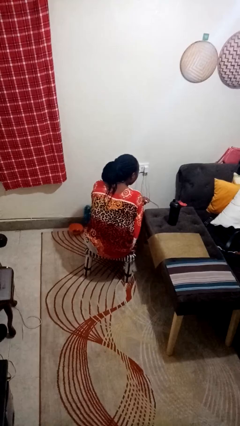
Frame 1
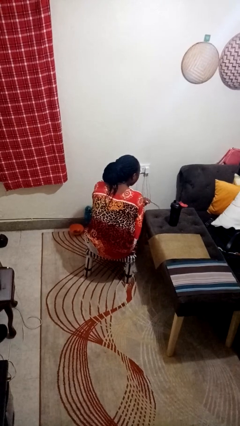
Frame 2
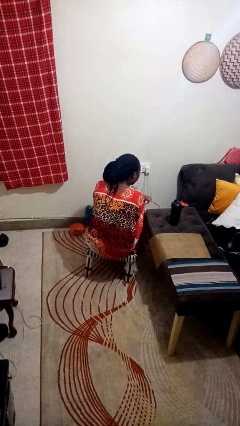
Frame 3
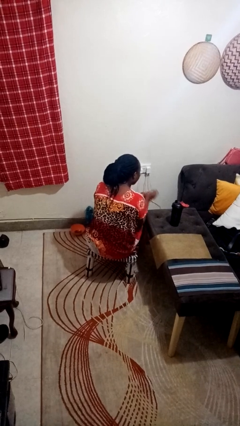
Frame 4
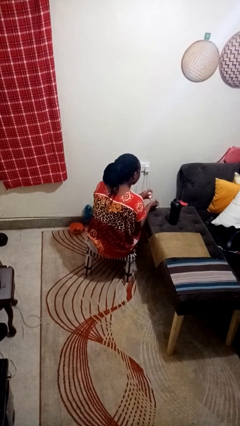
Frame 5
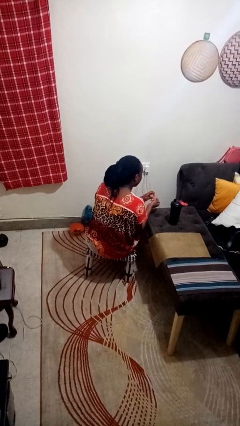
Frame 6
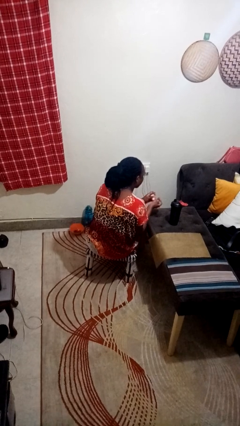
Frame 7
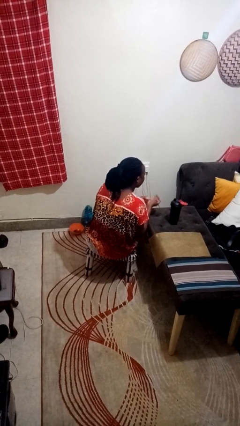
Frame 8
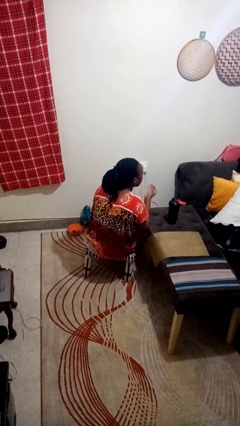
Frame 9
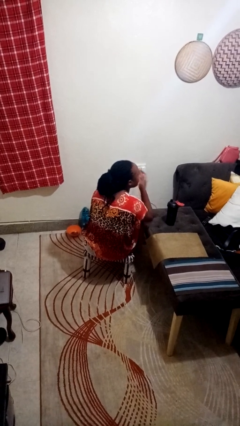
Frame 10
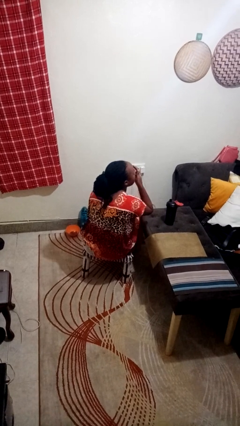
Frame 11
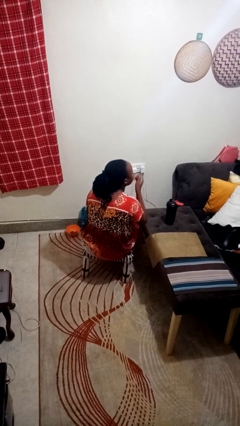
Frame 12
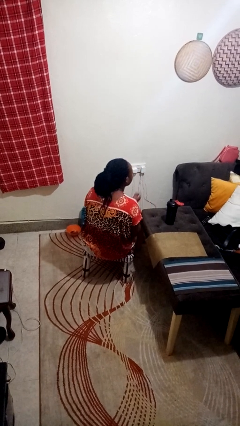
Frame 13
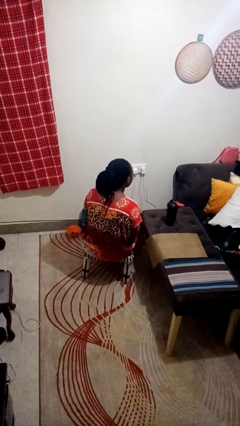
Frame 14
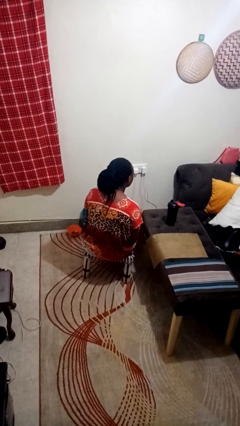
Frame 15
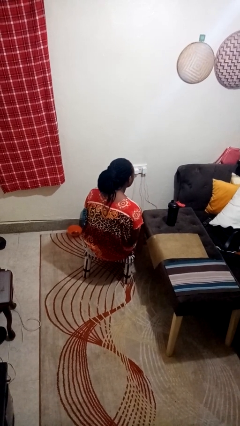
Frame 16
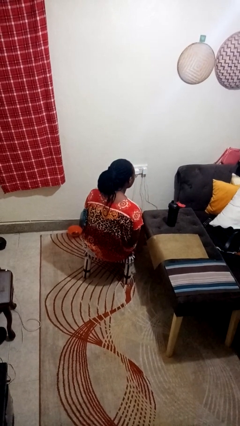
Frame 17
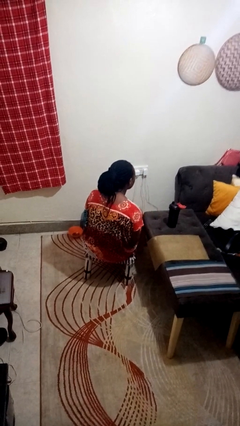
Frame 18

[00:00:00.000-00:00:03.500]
person takes medicine pills

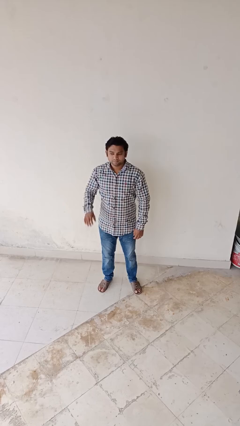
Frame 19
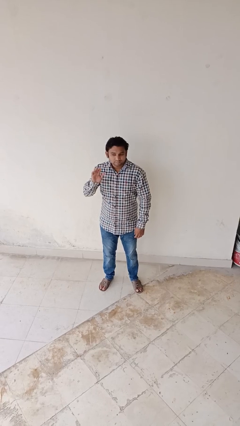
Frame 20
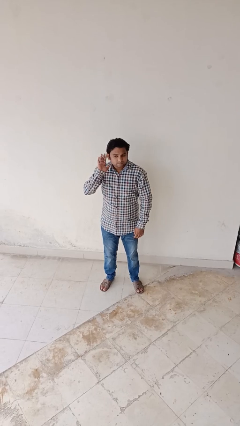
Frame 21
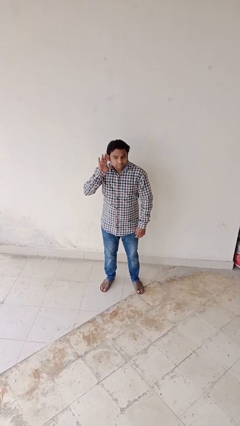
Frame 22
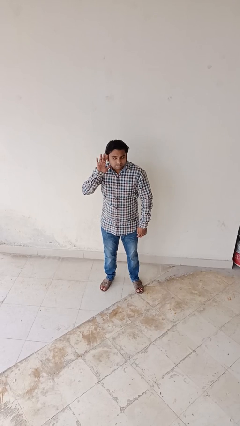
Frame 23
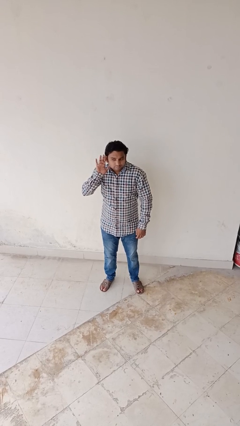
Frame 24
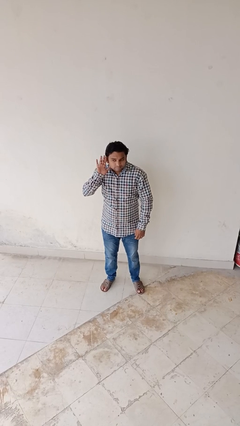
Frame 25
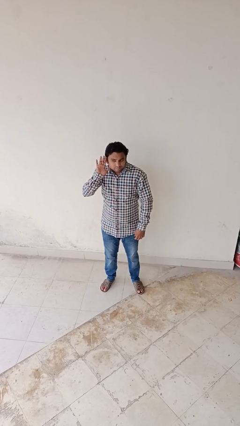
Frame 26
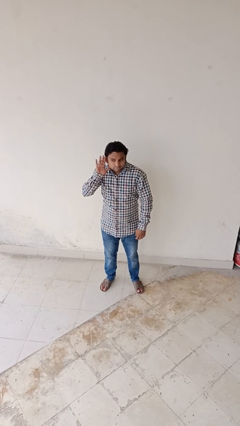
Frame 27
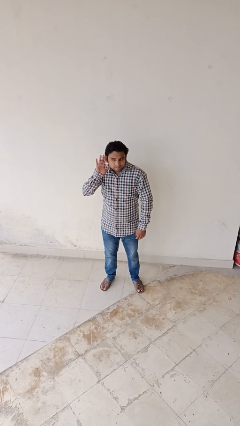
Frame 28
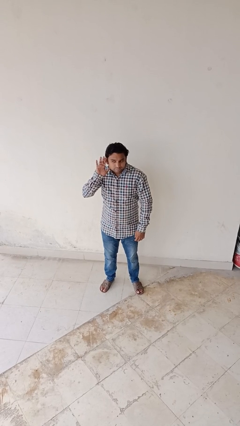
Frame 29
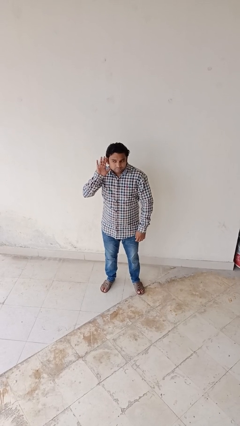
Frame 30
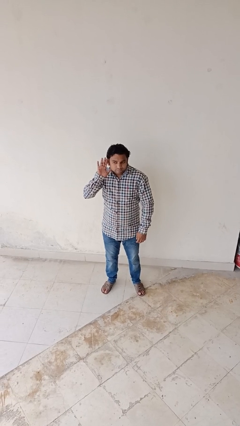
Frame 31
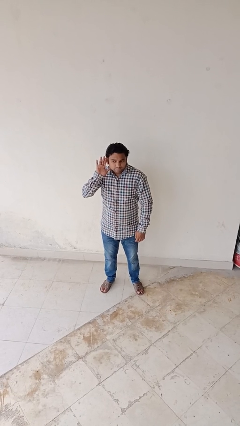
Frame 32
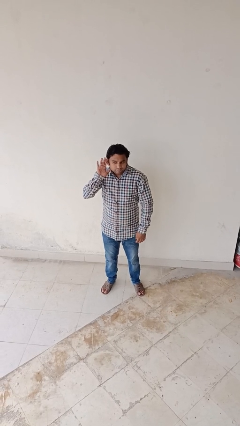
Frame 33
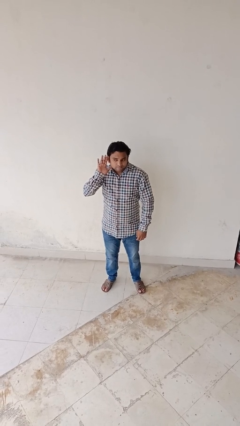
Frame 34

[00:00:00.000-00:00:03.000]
person gestures listen closely

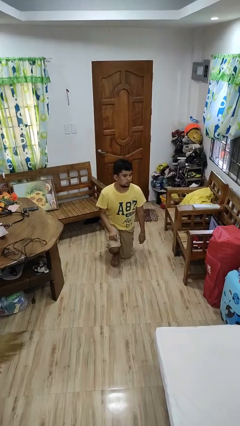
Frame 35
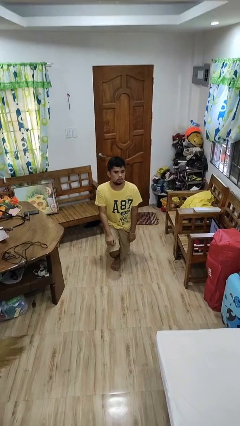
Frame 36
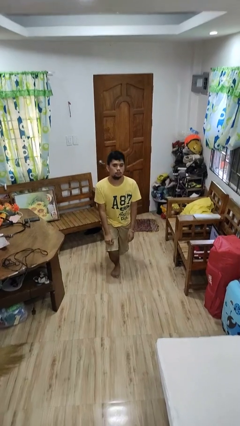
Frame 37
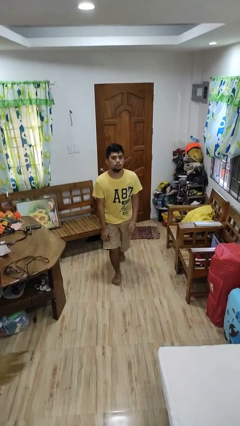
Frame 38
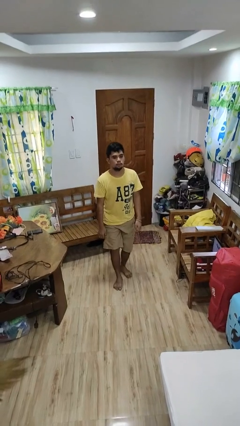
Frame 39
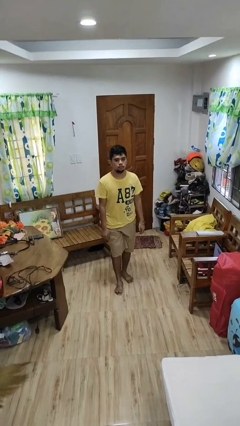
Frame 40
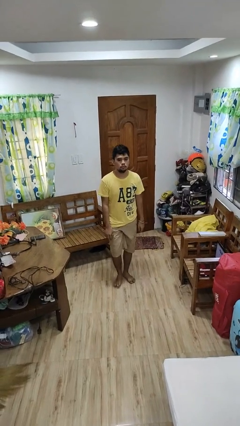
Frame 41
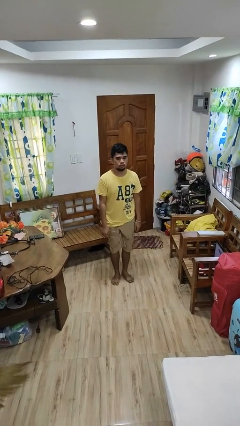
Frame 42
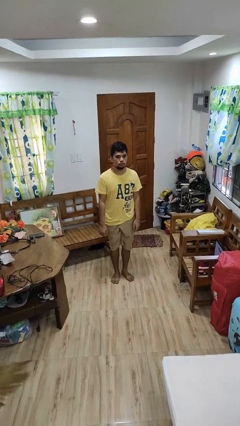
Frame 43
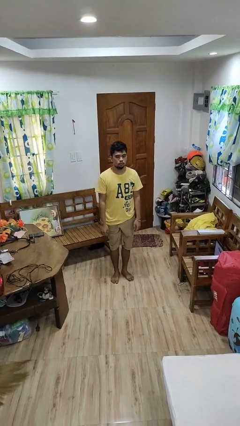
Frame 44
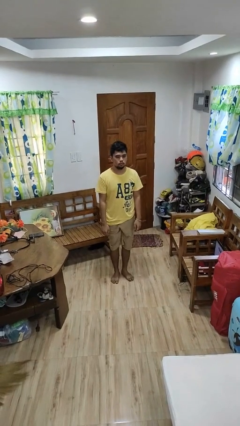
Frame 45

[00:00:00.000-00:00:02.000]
person stands up from floor

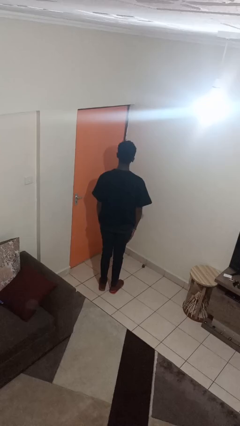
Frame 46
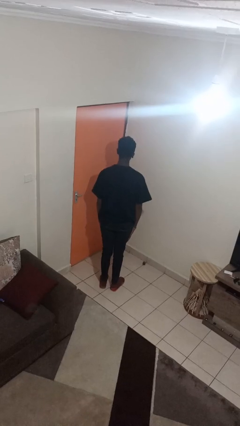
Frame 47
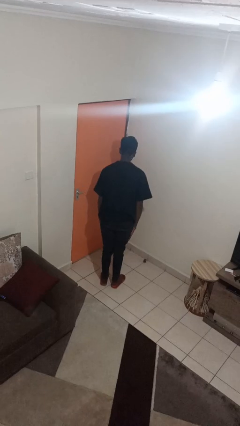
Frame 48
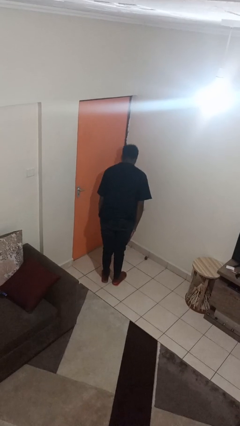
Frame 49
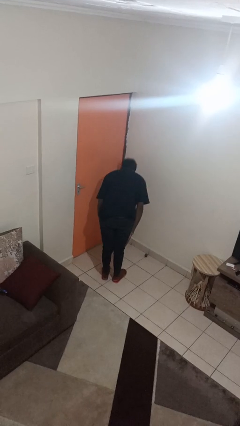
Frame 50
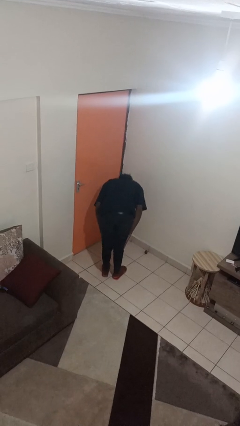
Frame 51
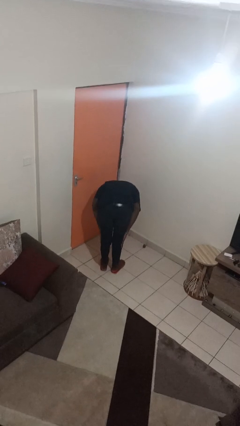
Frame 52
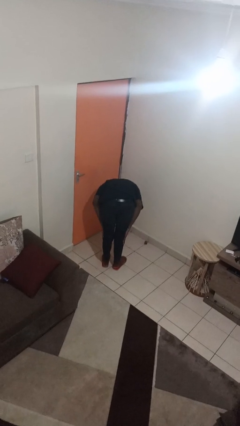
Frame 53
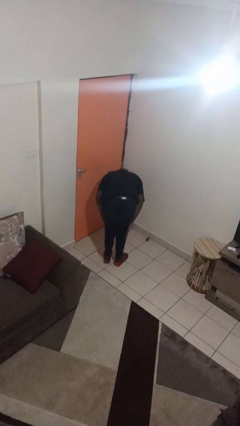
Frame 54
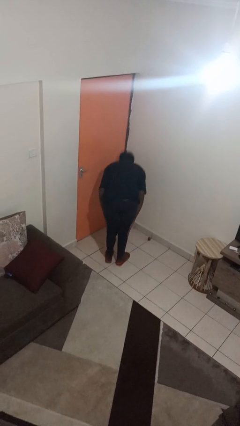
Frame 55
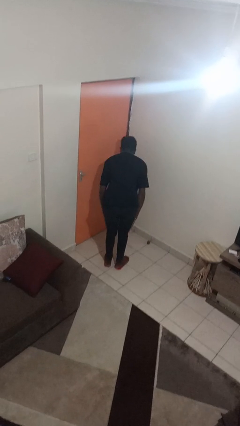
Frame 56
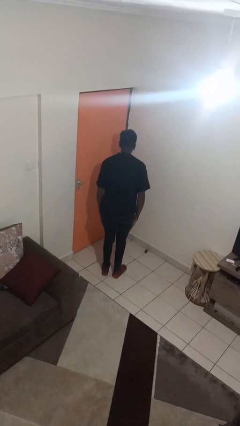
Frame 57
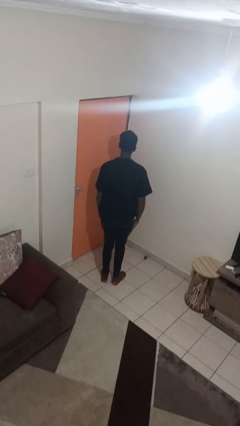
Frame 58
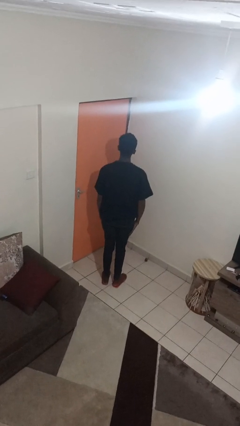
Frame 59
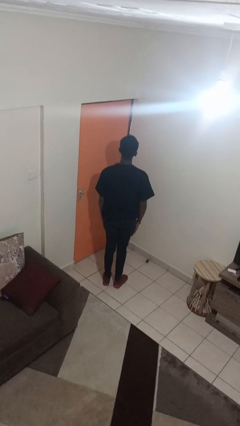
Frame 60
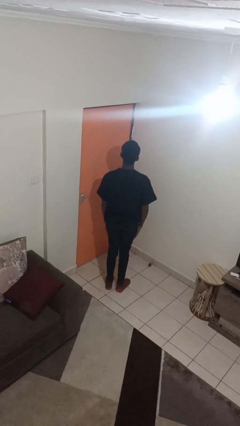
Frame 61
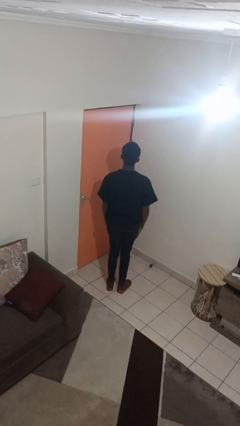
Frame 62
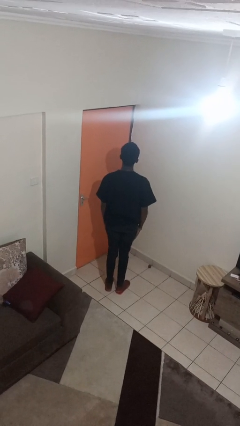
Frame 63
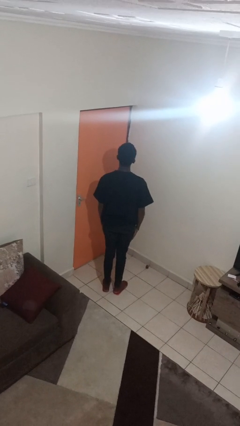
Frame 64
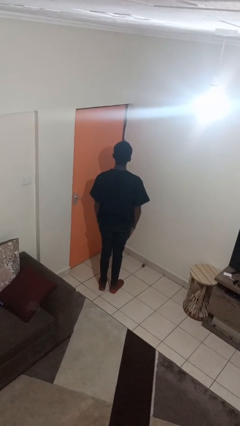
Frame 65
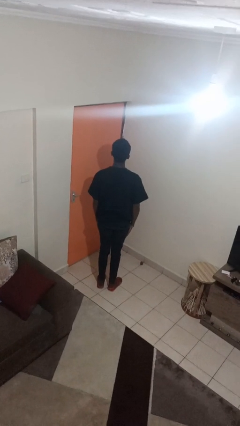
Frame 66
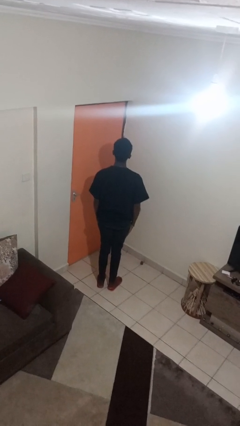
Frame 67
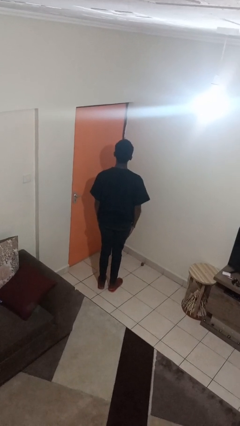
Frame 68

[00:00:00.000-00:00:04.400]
person bows

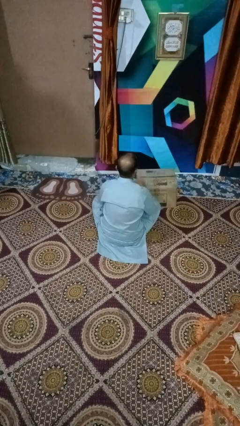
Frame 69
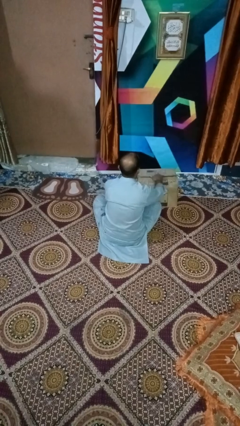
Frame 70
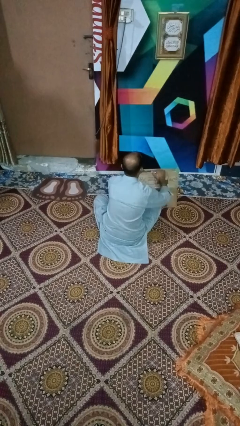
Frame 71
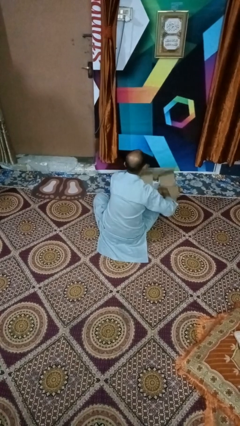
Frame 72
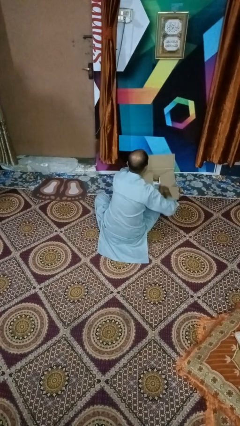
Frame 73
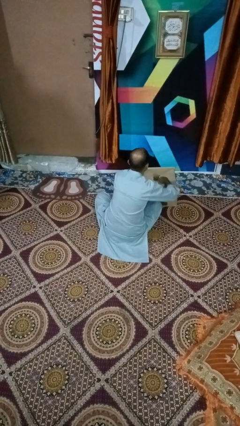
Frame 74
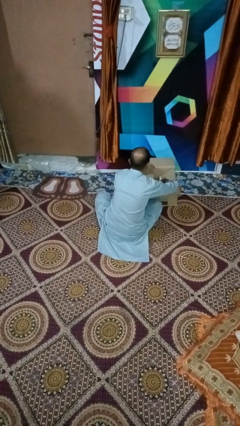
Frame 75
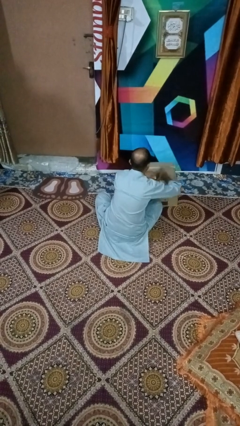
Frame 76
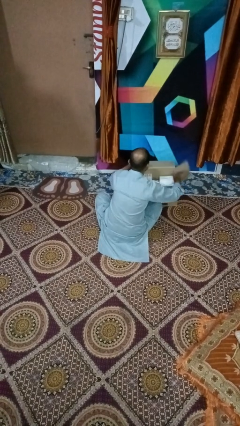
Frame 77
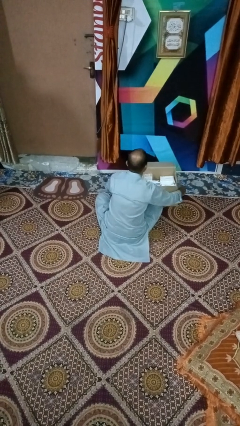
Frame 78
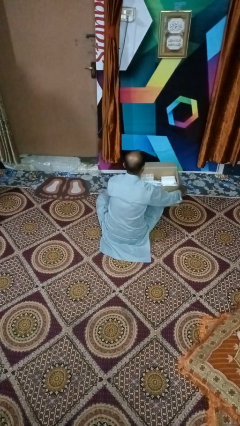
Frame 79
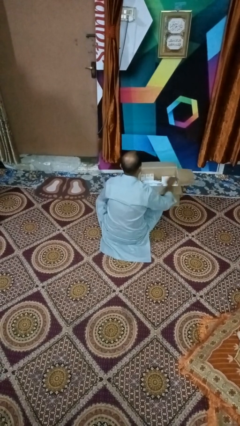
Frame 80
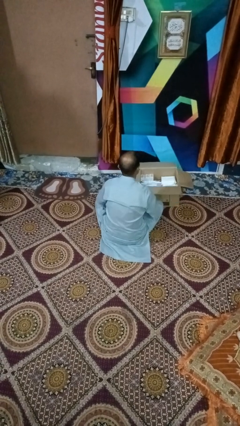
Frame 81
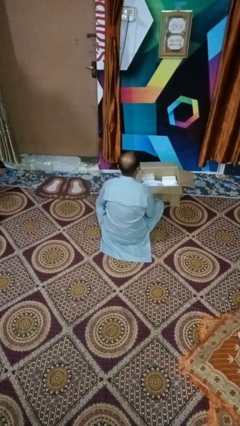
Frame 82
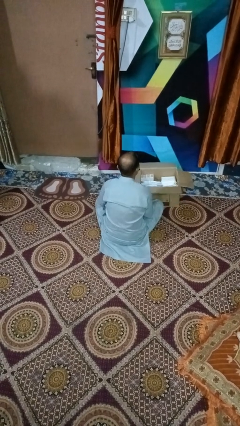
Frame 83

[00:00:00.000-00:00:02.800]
person opens box

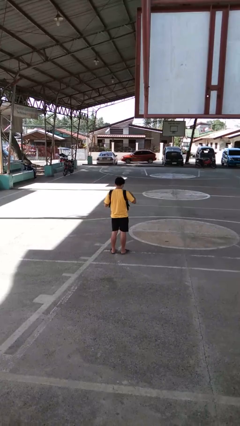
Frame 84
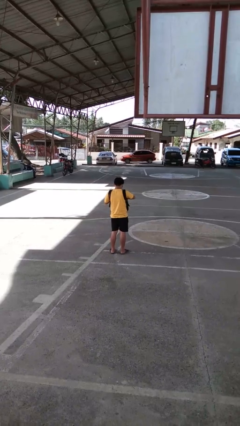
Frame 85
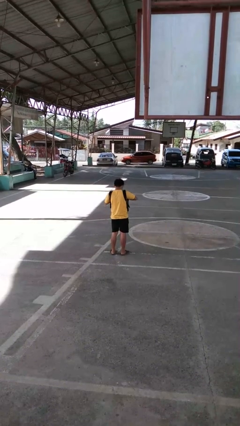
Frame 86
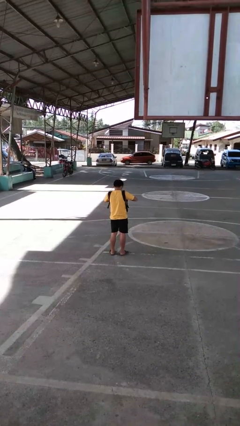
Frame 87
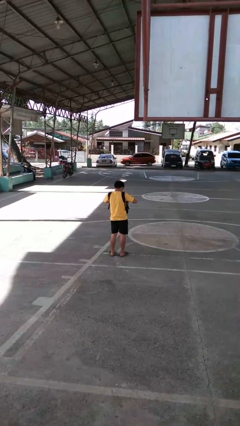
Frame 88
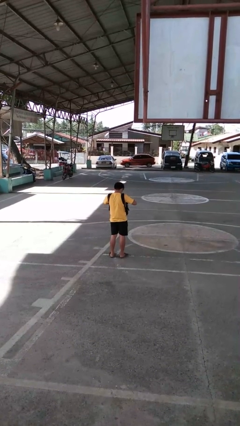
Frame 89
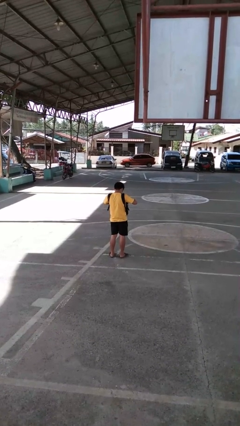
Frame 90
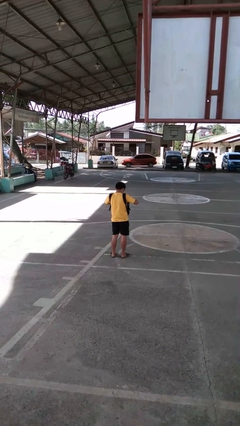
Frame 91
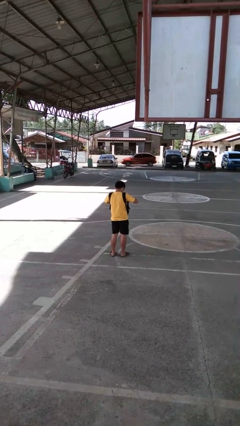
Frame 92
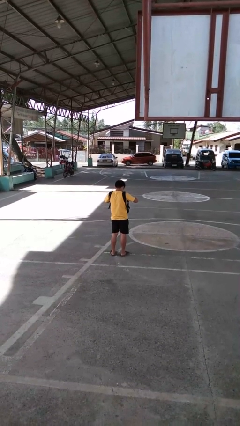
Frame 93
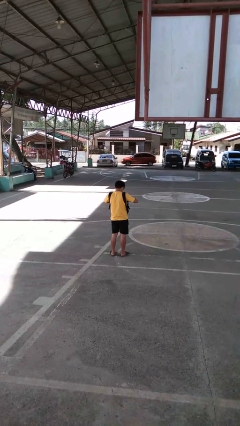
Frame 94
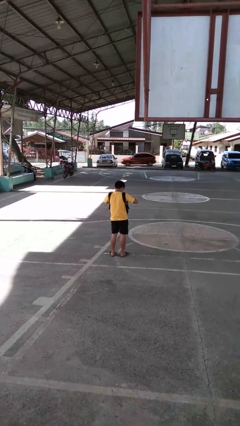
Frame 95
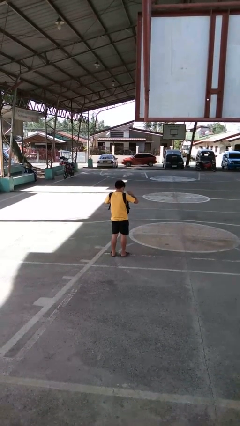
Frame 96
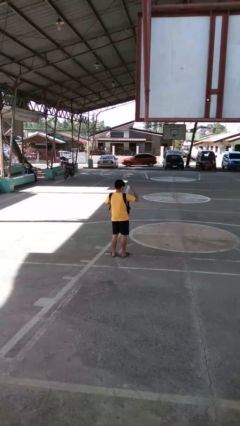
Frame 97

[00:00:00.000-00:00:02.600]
person searches in backpack
